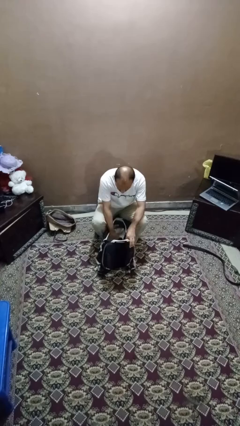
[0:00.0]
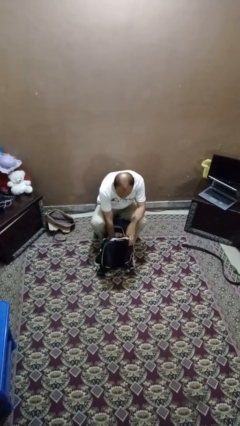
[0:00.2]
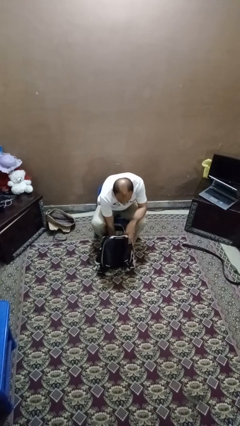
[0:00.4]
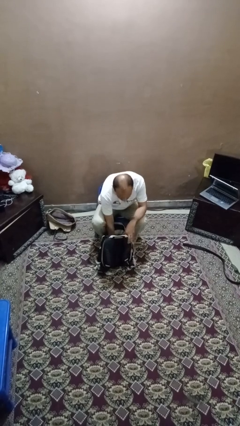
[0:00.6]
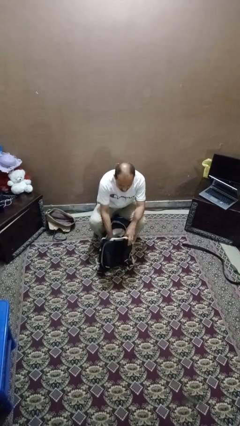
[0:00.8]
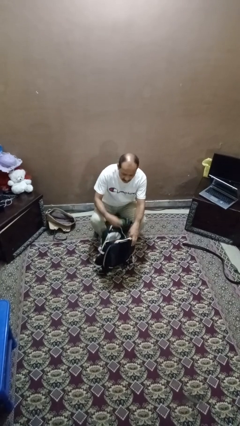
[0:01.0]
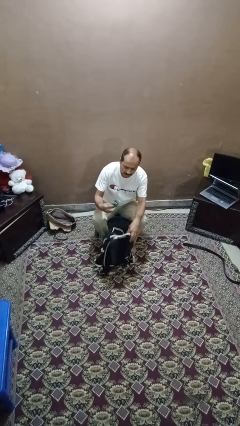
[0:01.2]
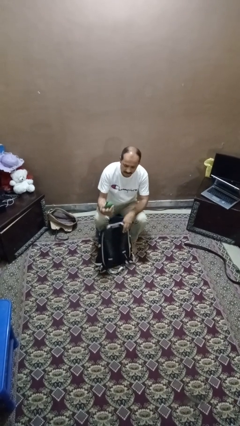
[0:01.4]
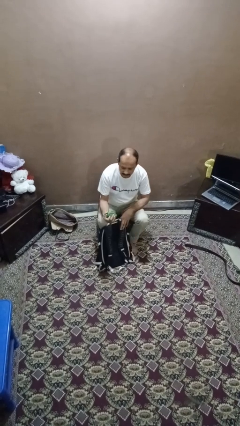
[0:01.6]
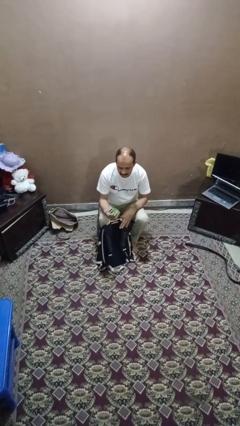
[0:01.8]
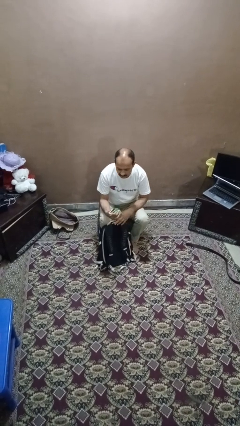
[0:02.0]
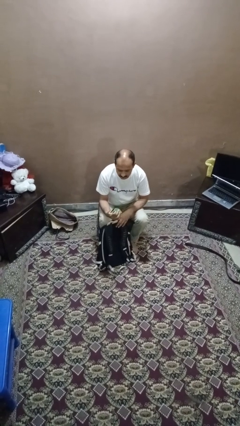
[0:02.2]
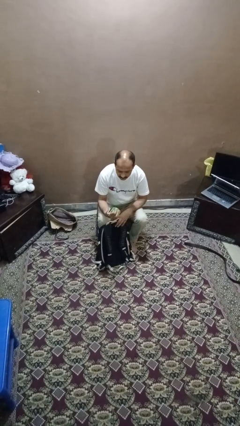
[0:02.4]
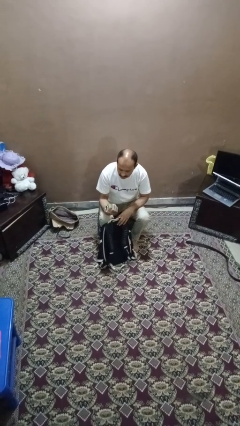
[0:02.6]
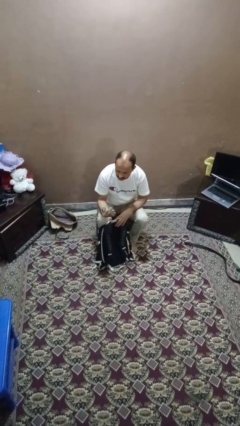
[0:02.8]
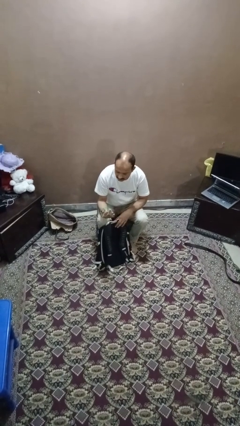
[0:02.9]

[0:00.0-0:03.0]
person takes object from backpack

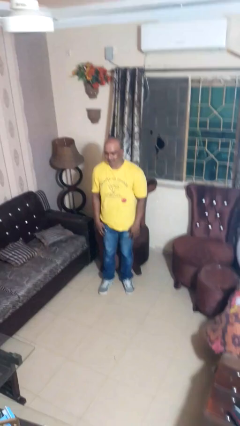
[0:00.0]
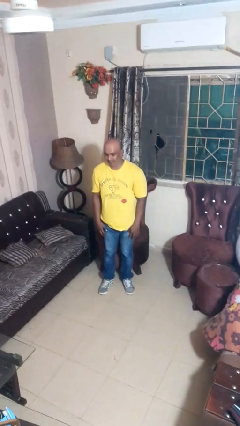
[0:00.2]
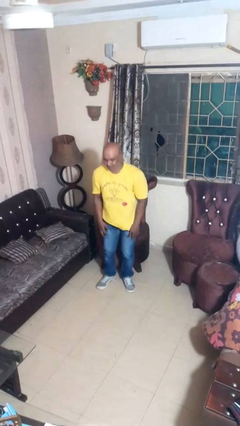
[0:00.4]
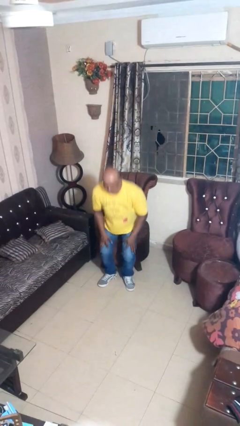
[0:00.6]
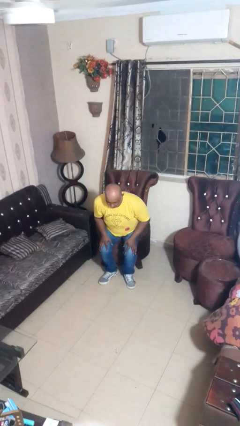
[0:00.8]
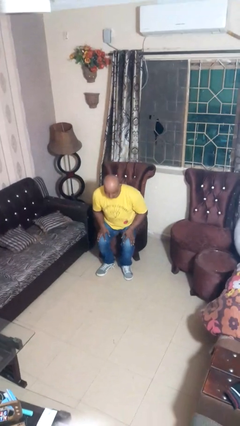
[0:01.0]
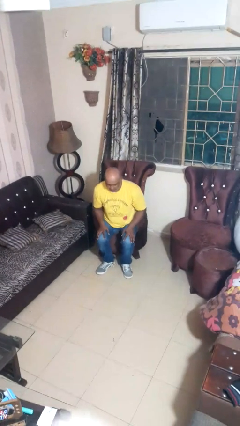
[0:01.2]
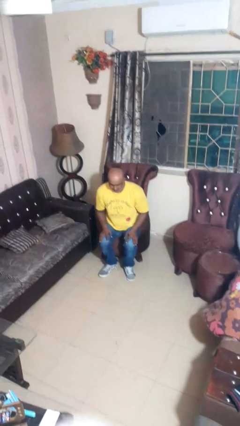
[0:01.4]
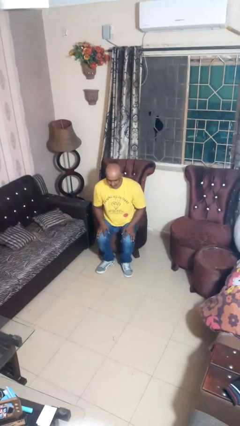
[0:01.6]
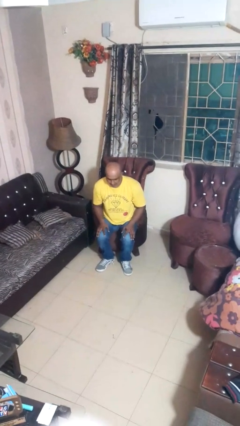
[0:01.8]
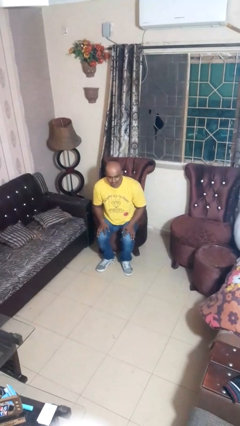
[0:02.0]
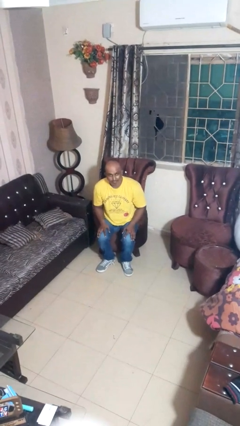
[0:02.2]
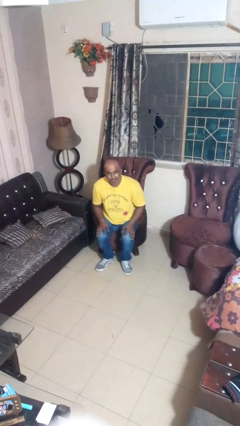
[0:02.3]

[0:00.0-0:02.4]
person sits down

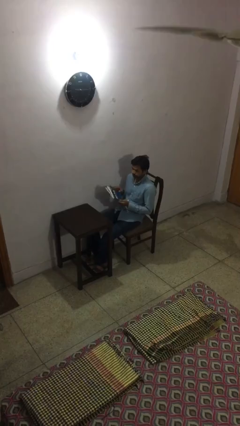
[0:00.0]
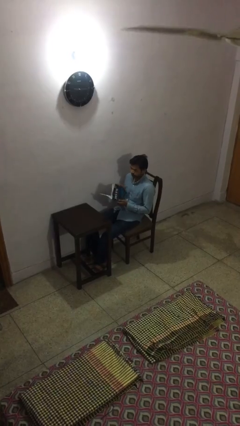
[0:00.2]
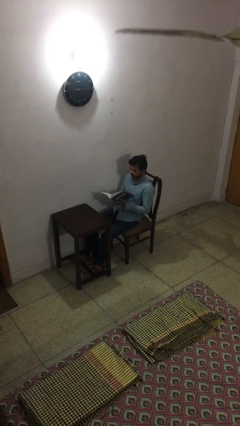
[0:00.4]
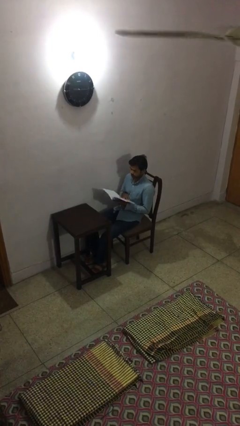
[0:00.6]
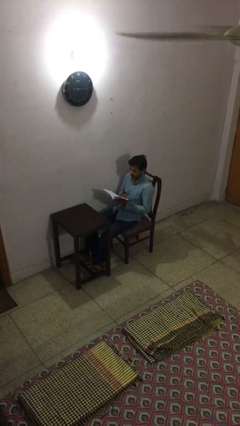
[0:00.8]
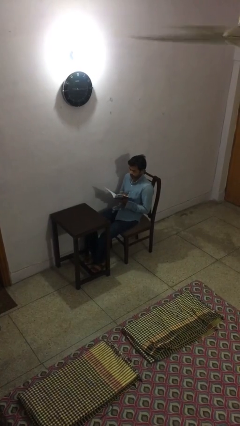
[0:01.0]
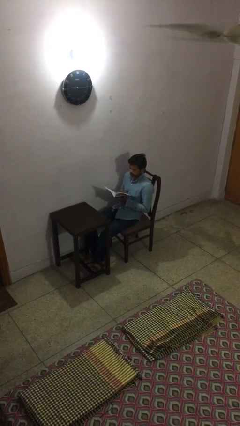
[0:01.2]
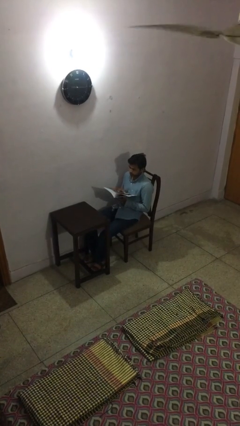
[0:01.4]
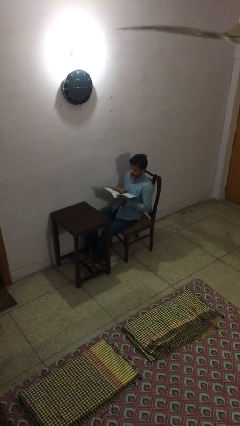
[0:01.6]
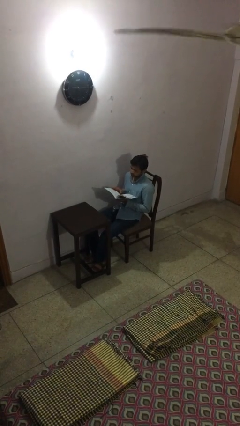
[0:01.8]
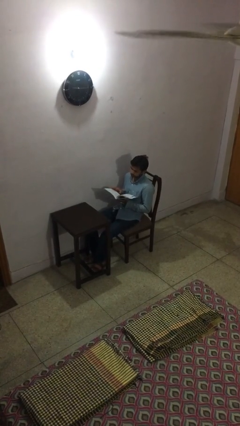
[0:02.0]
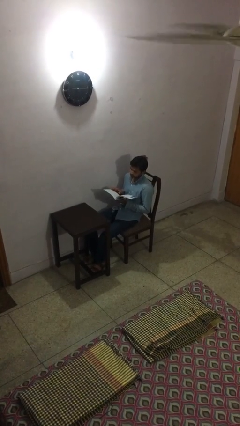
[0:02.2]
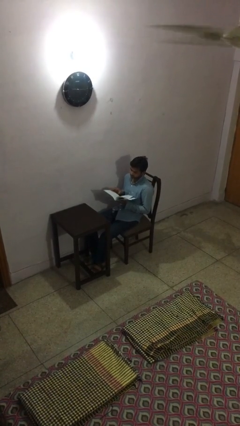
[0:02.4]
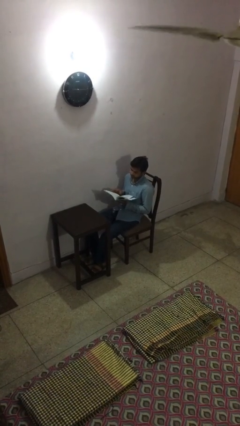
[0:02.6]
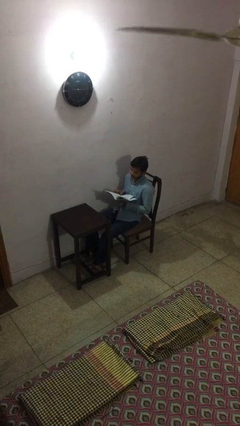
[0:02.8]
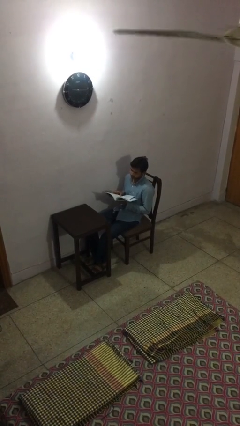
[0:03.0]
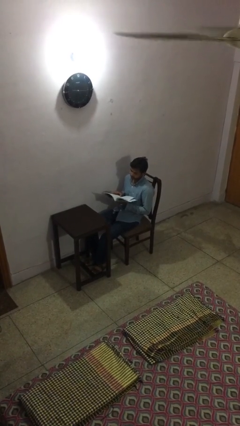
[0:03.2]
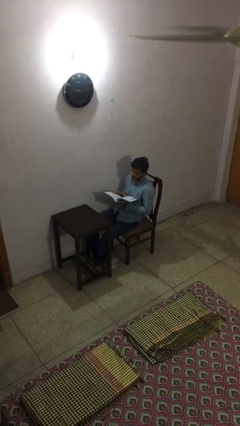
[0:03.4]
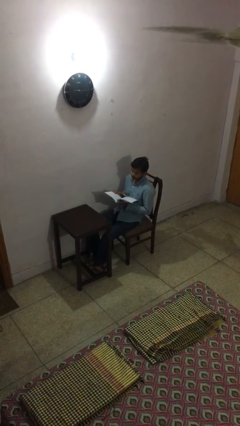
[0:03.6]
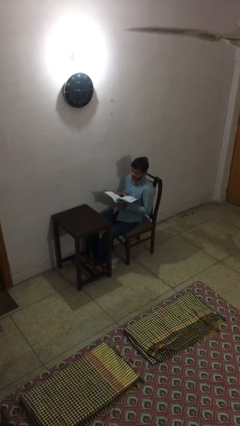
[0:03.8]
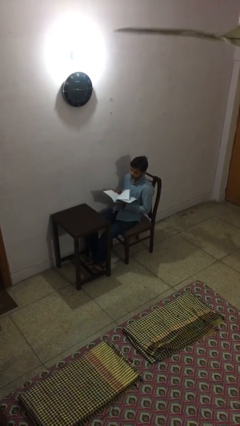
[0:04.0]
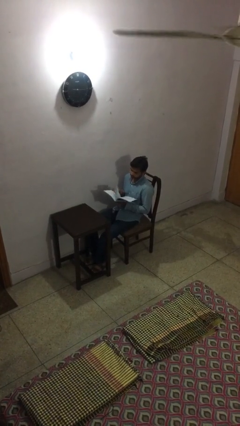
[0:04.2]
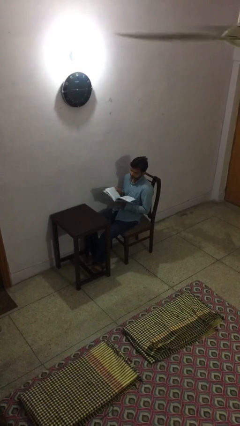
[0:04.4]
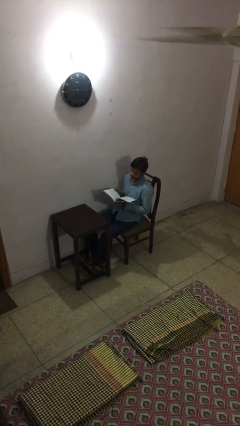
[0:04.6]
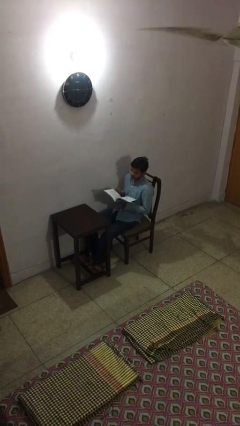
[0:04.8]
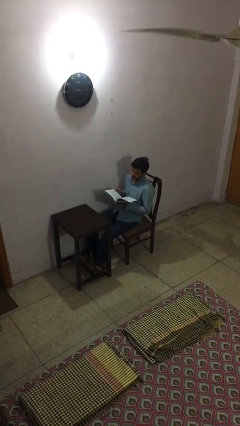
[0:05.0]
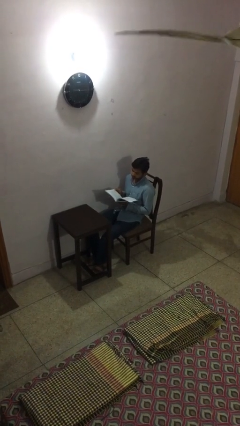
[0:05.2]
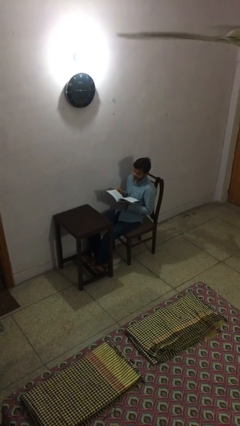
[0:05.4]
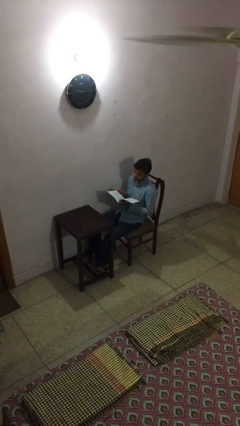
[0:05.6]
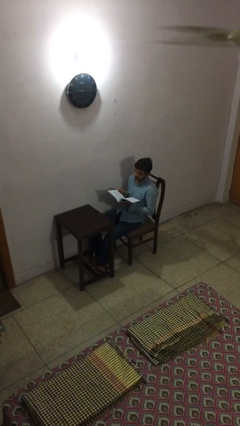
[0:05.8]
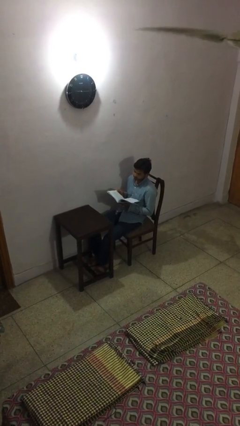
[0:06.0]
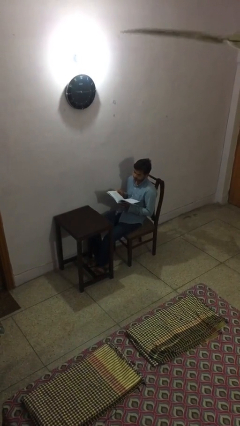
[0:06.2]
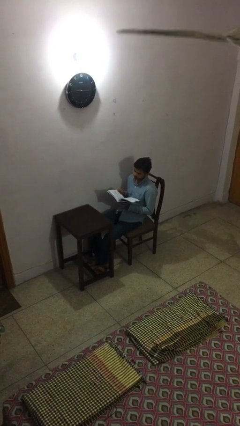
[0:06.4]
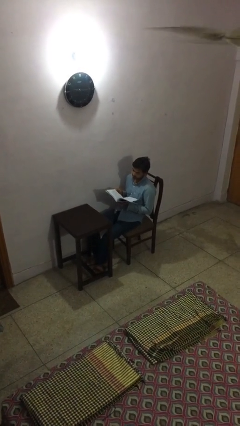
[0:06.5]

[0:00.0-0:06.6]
person reads document

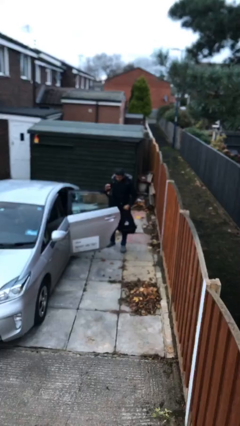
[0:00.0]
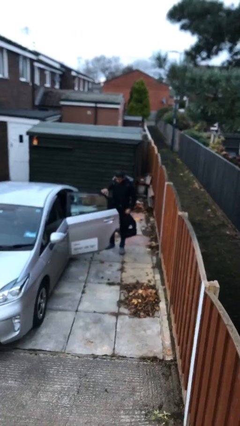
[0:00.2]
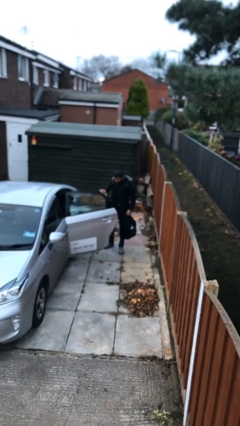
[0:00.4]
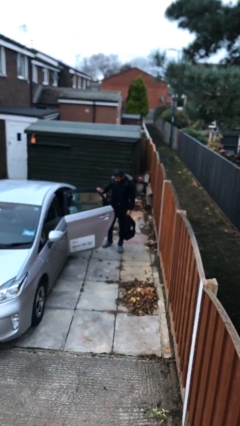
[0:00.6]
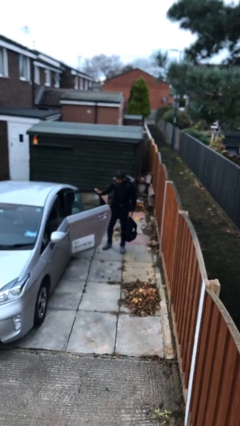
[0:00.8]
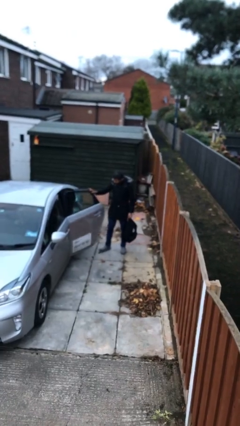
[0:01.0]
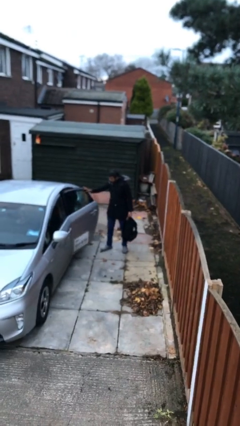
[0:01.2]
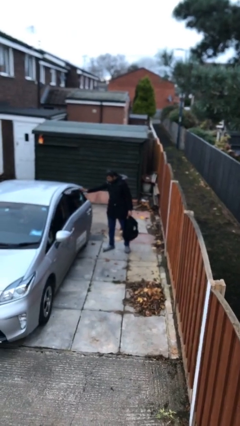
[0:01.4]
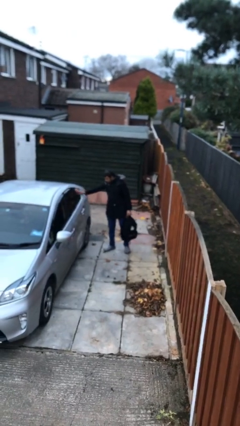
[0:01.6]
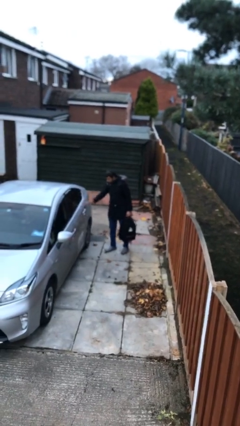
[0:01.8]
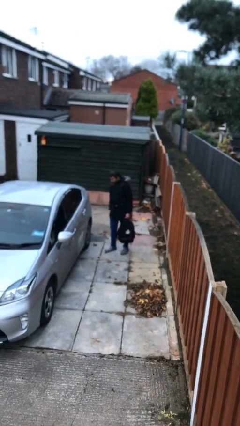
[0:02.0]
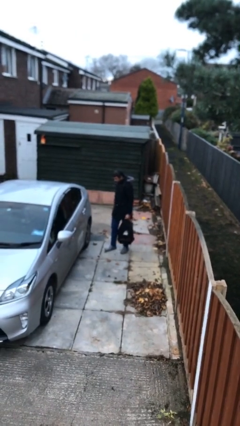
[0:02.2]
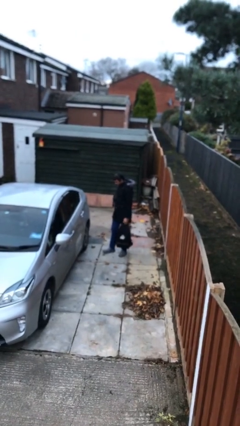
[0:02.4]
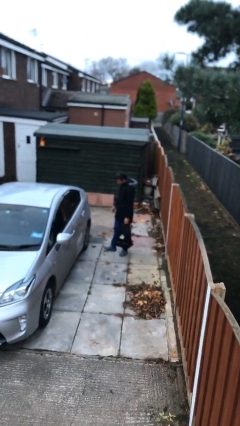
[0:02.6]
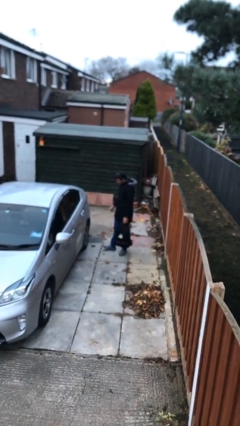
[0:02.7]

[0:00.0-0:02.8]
person closes car door

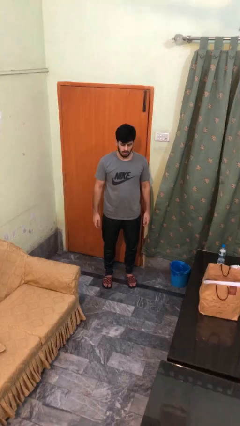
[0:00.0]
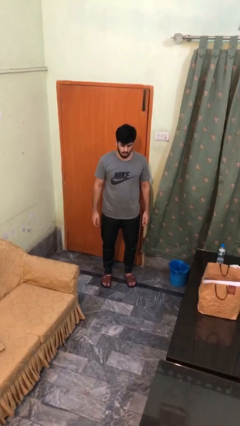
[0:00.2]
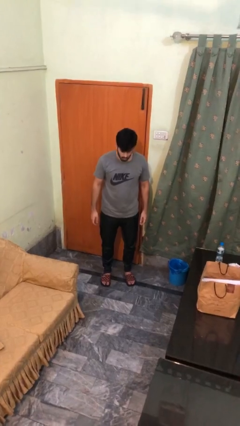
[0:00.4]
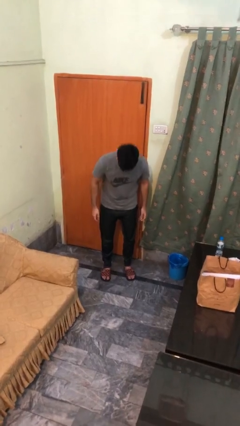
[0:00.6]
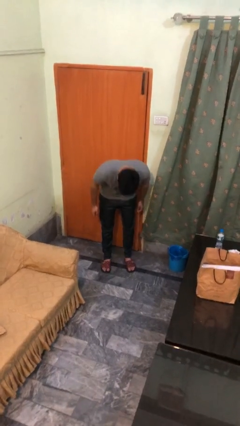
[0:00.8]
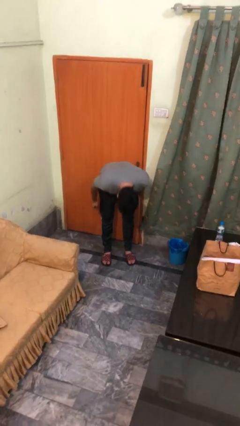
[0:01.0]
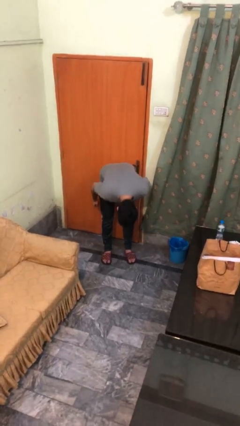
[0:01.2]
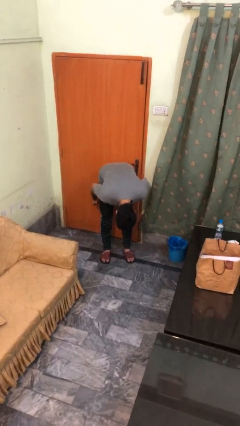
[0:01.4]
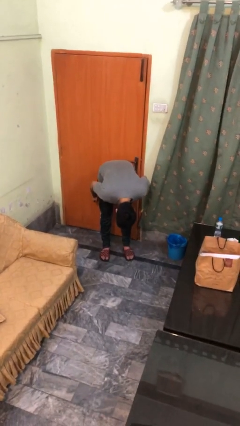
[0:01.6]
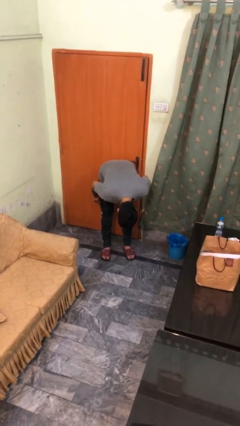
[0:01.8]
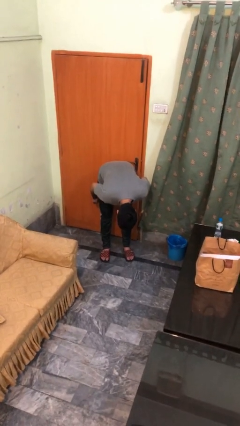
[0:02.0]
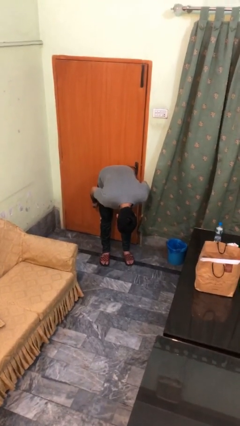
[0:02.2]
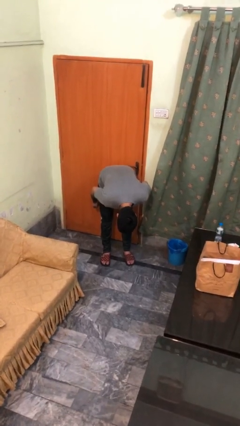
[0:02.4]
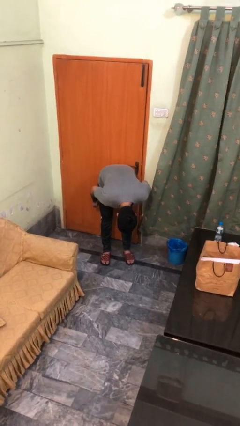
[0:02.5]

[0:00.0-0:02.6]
person bows
